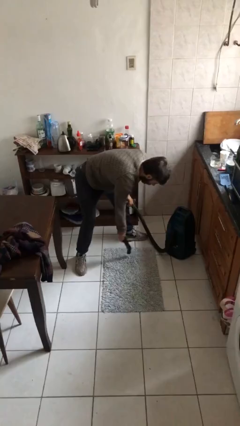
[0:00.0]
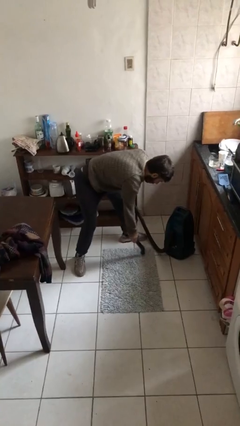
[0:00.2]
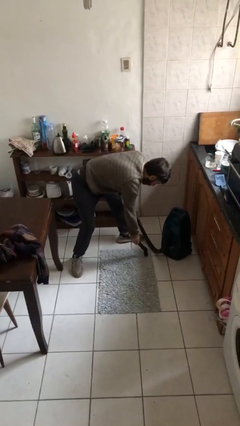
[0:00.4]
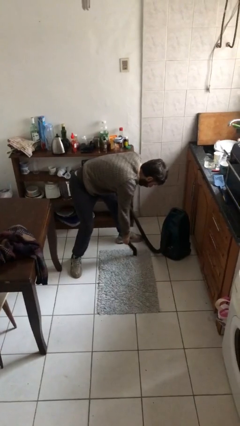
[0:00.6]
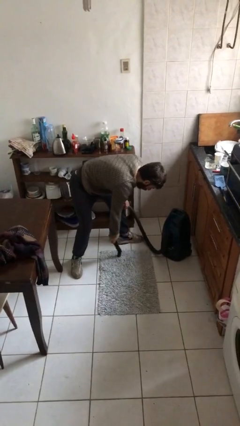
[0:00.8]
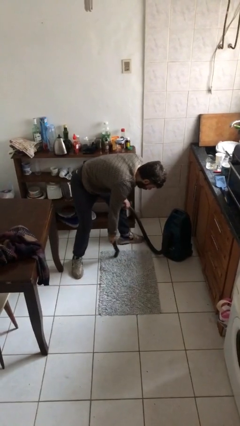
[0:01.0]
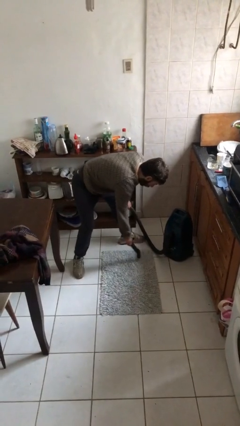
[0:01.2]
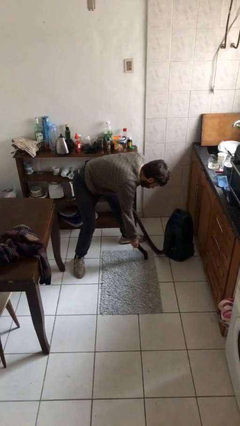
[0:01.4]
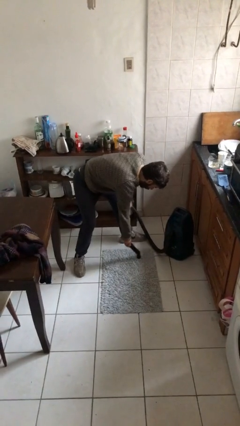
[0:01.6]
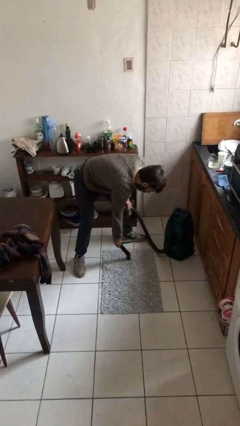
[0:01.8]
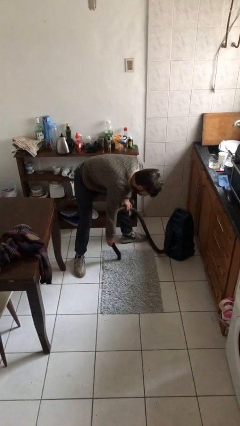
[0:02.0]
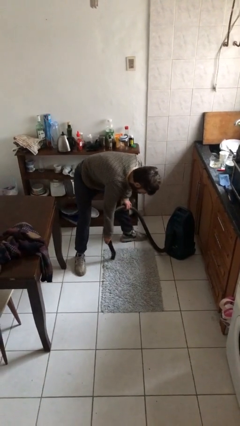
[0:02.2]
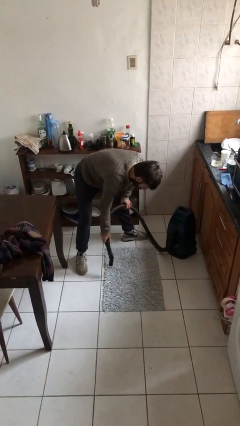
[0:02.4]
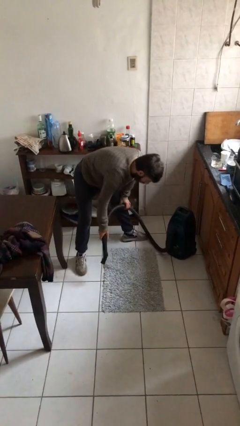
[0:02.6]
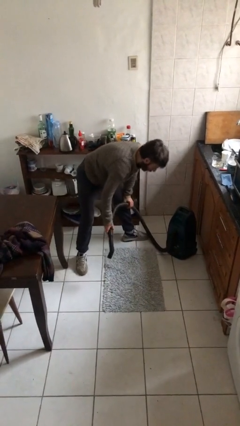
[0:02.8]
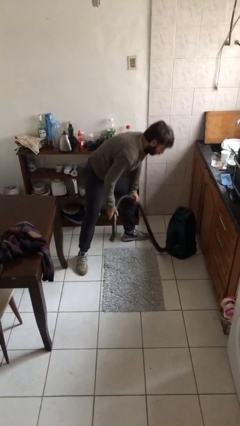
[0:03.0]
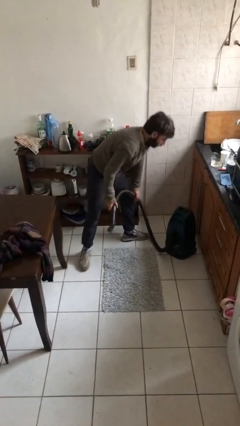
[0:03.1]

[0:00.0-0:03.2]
person vacuums carpet

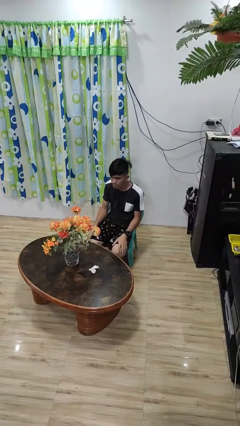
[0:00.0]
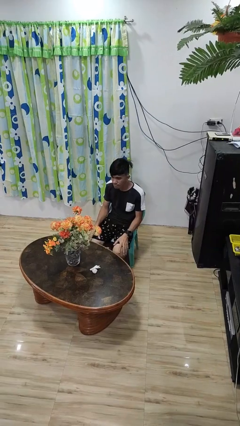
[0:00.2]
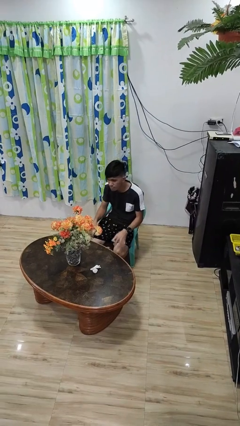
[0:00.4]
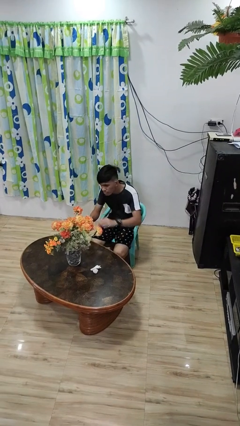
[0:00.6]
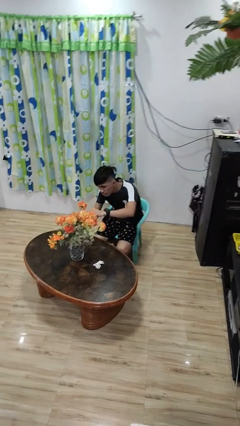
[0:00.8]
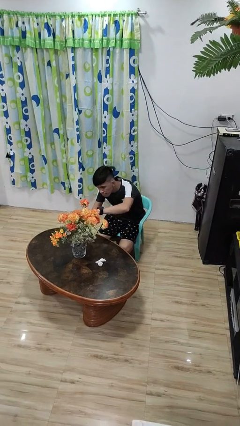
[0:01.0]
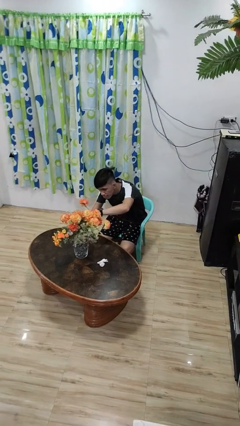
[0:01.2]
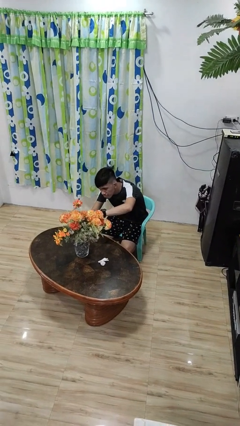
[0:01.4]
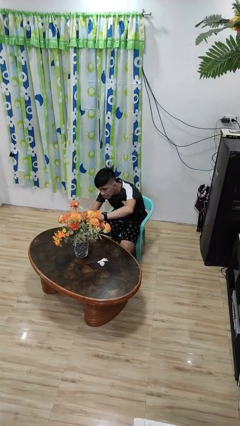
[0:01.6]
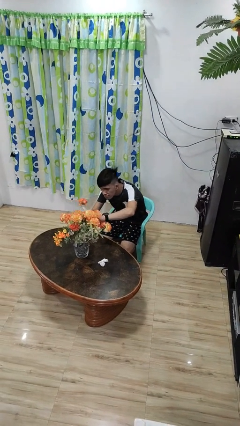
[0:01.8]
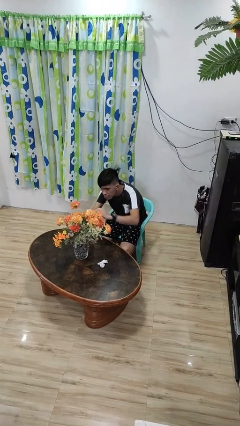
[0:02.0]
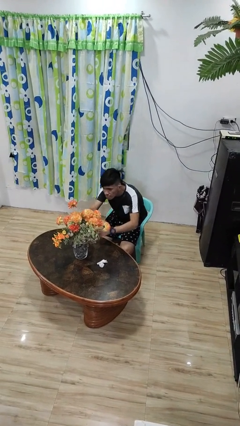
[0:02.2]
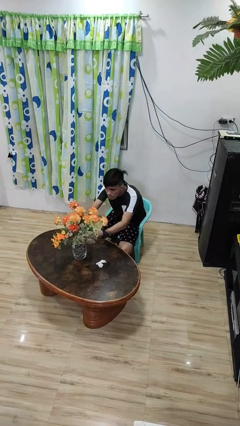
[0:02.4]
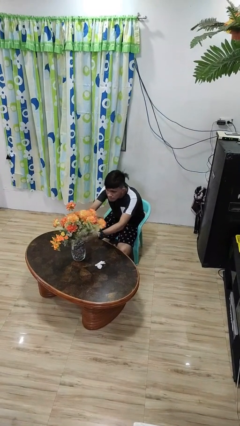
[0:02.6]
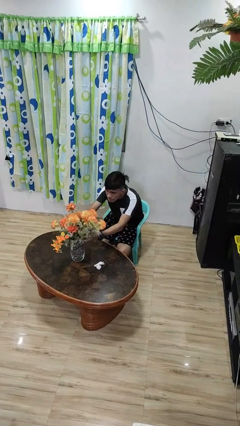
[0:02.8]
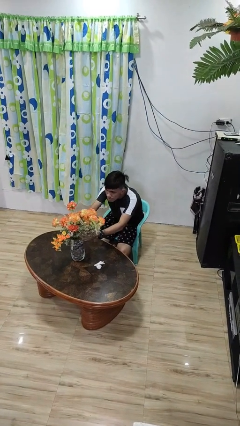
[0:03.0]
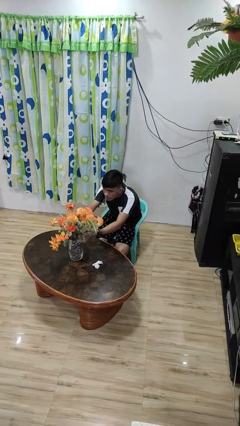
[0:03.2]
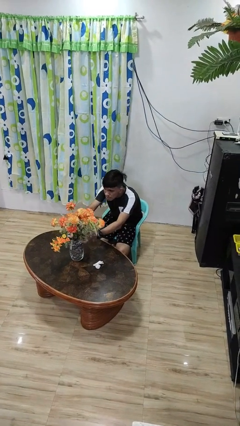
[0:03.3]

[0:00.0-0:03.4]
person arranges flowers in vase

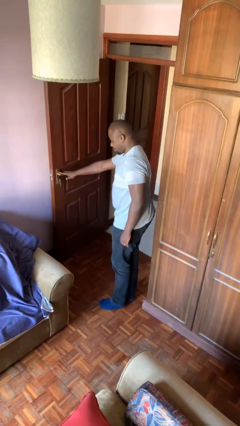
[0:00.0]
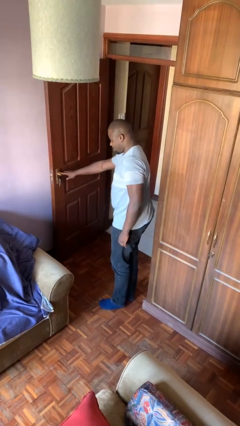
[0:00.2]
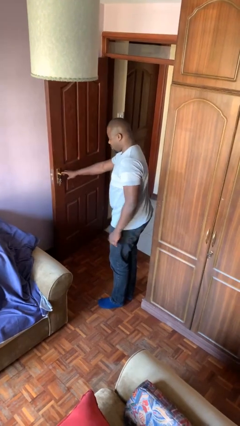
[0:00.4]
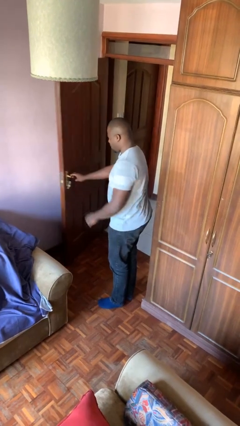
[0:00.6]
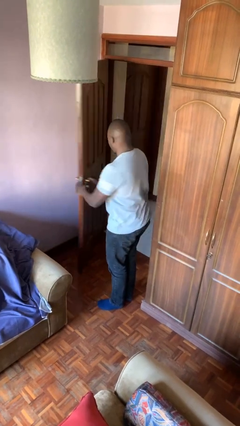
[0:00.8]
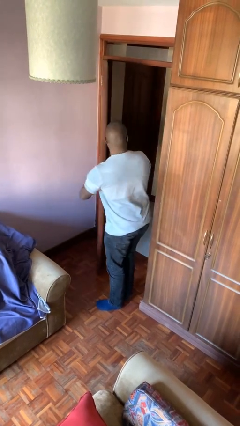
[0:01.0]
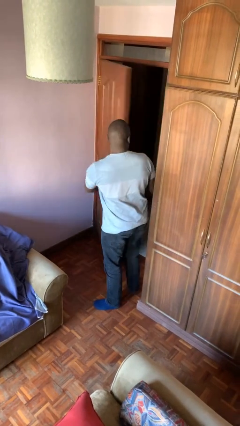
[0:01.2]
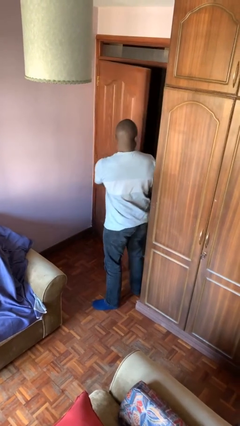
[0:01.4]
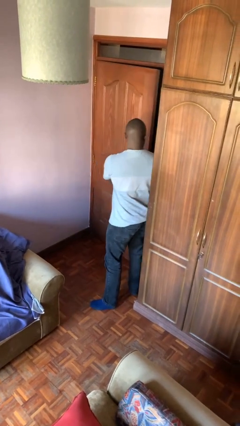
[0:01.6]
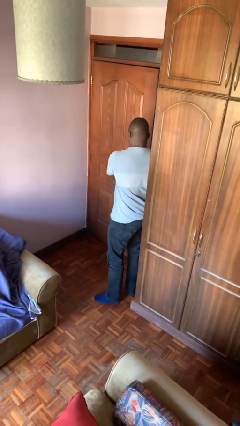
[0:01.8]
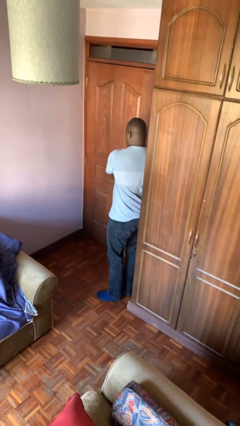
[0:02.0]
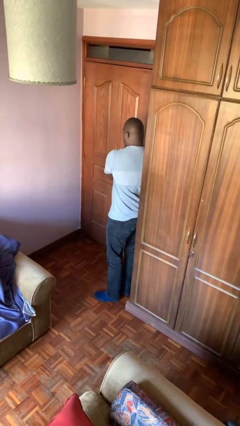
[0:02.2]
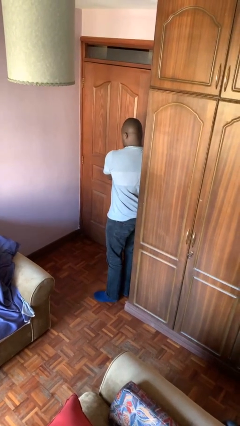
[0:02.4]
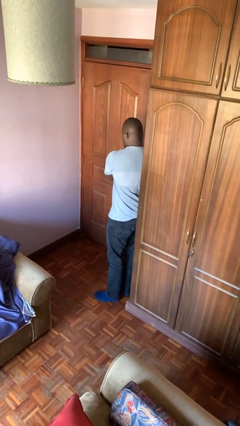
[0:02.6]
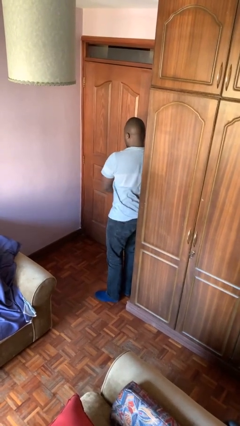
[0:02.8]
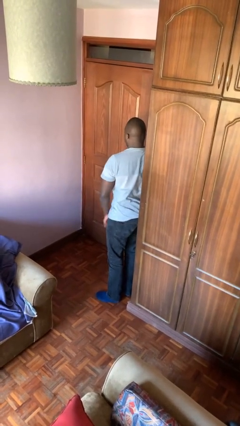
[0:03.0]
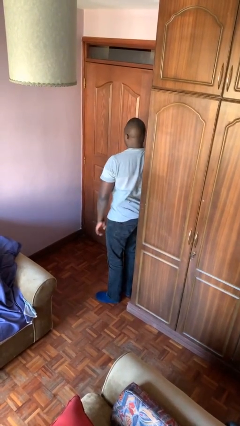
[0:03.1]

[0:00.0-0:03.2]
person closes facility door

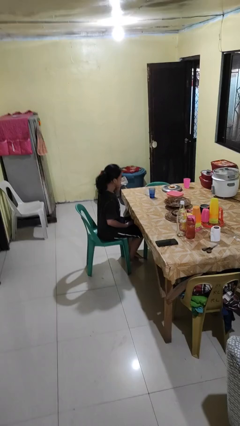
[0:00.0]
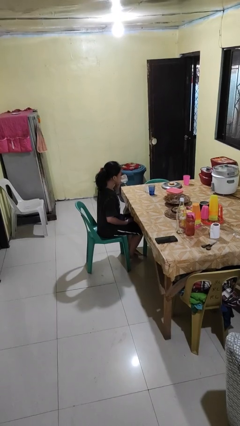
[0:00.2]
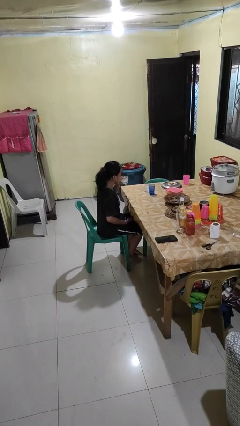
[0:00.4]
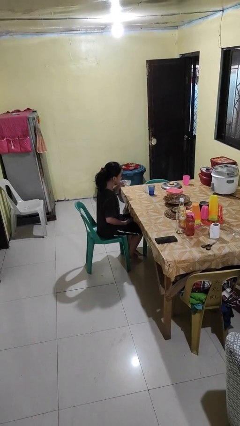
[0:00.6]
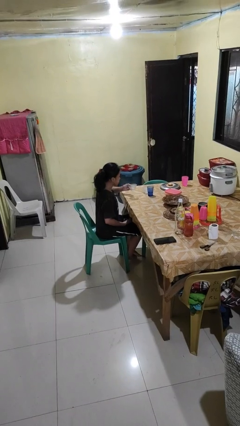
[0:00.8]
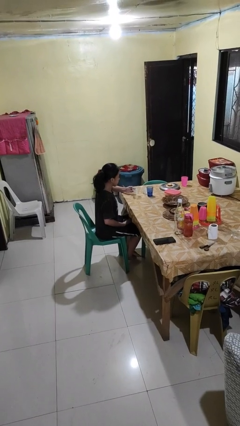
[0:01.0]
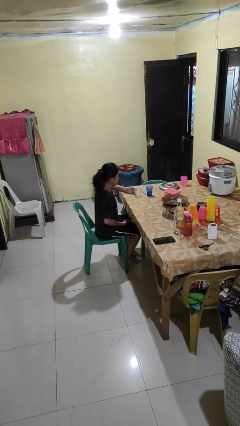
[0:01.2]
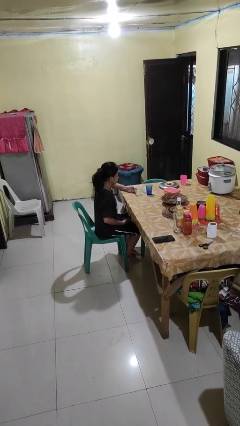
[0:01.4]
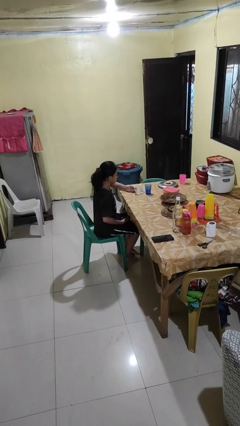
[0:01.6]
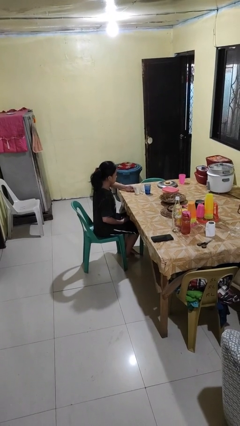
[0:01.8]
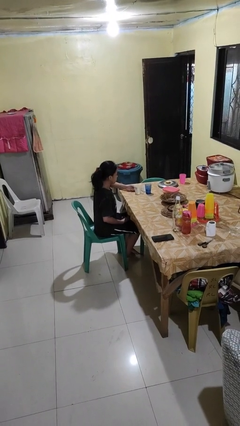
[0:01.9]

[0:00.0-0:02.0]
person puts down object on table

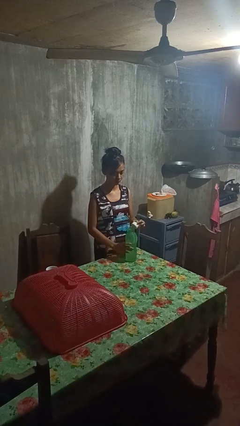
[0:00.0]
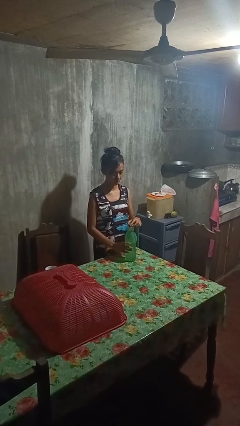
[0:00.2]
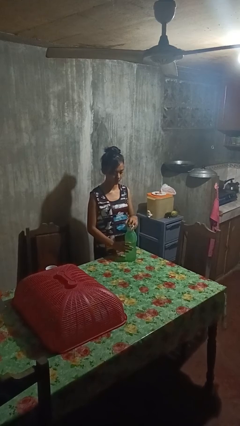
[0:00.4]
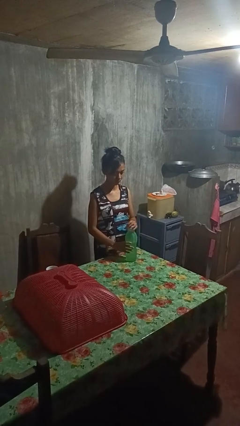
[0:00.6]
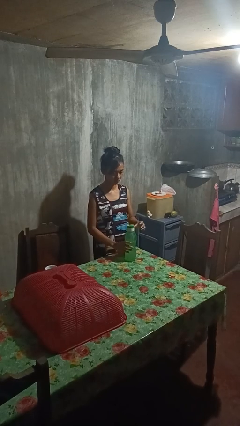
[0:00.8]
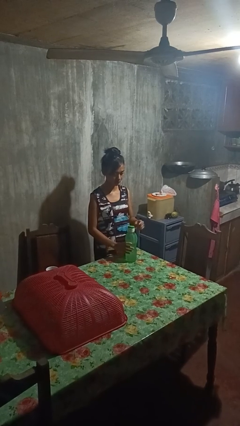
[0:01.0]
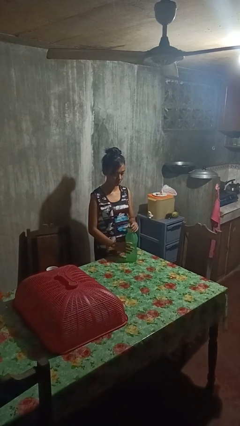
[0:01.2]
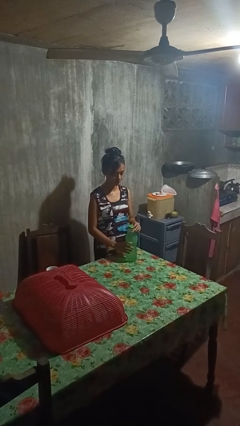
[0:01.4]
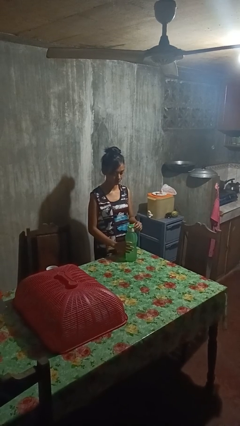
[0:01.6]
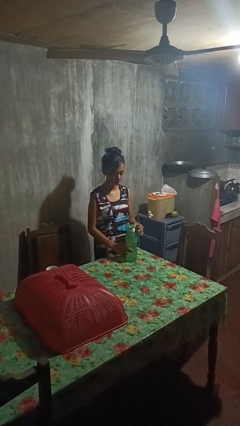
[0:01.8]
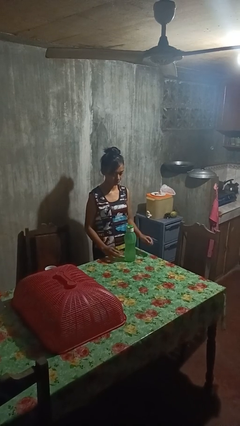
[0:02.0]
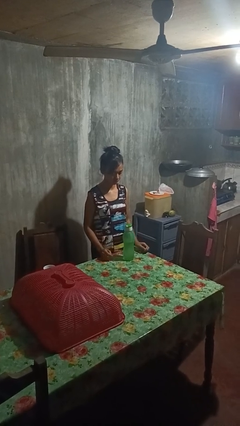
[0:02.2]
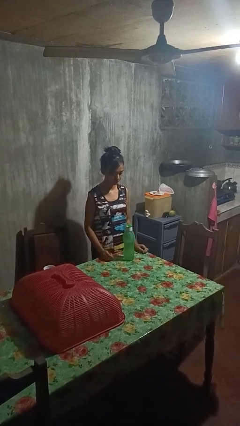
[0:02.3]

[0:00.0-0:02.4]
person screws lid to bottle

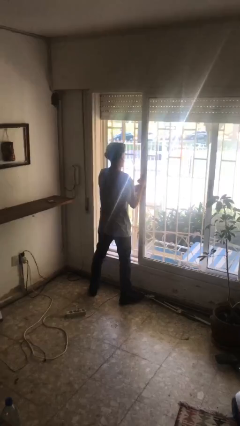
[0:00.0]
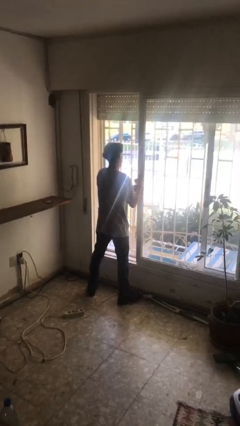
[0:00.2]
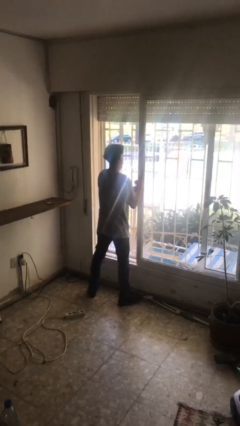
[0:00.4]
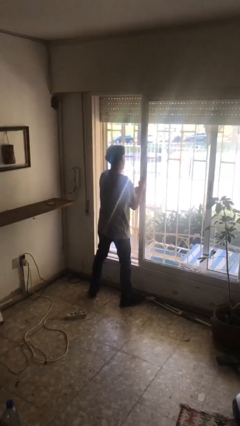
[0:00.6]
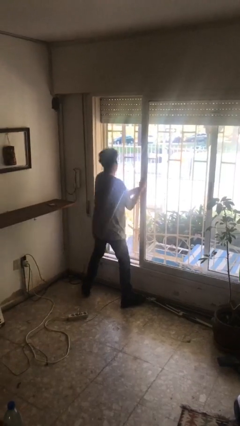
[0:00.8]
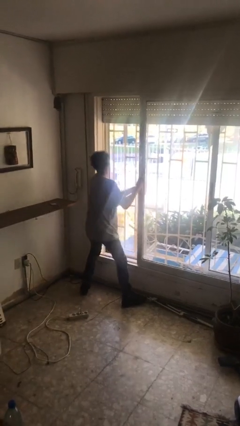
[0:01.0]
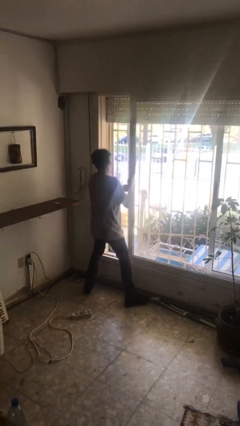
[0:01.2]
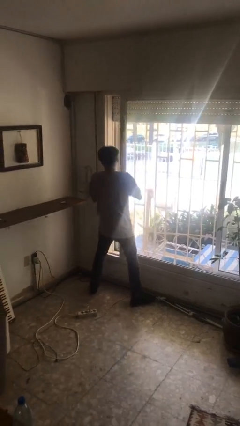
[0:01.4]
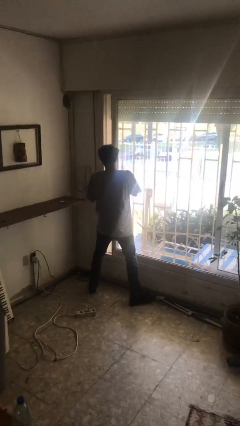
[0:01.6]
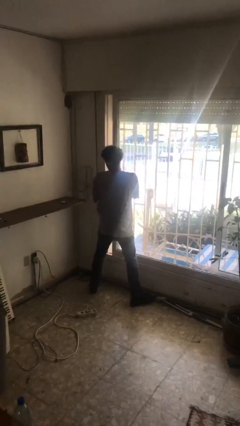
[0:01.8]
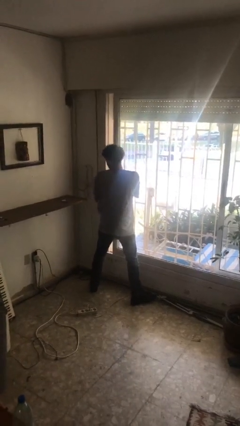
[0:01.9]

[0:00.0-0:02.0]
person closes sliding door

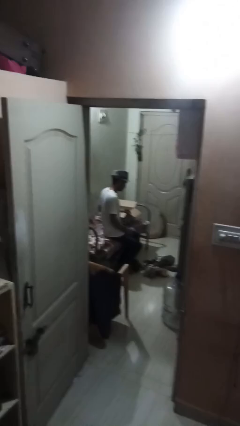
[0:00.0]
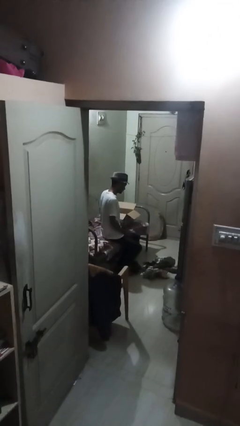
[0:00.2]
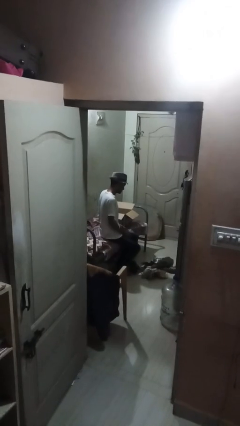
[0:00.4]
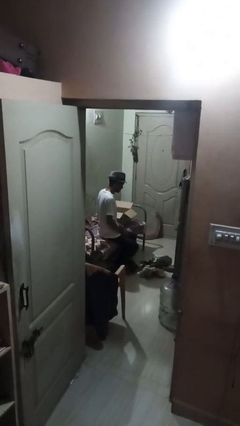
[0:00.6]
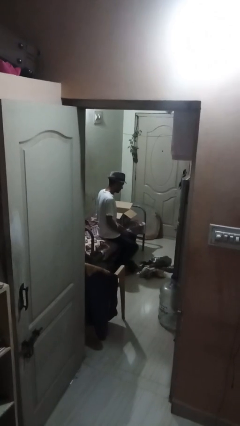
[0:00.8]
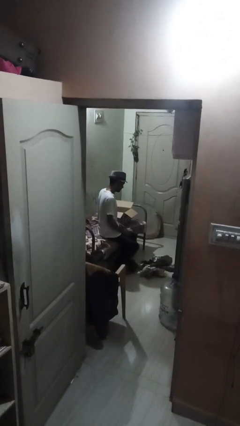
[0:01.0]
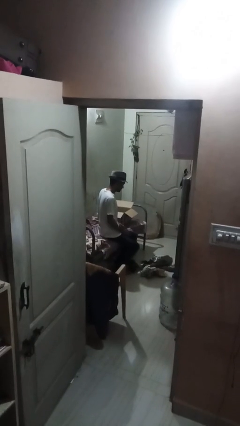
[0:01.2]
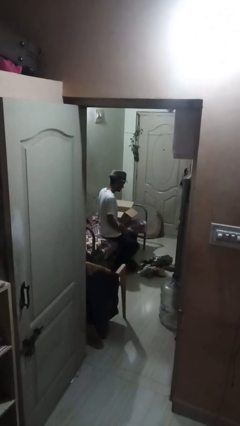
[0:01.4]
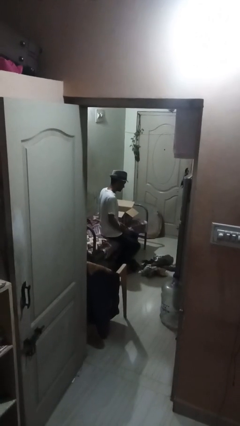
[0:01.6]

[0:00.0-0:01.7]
person unloads box onto floor
